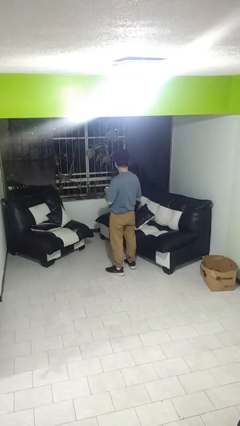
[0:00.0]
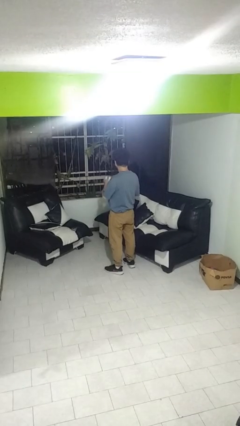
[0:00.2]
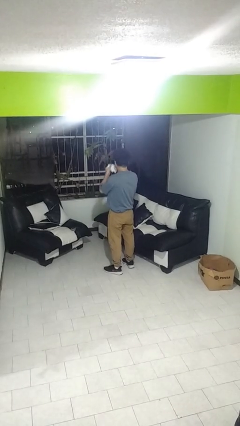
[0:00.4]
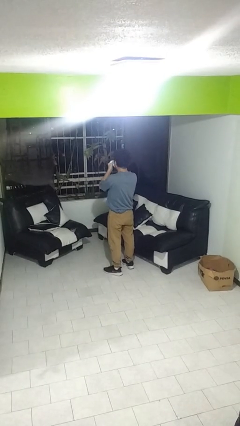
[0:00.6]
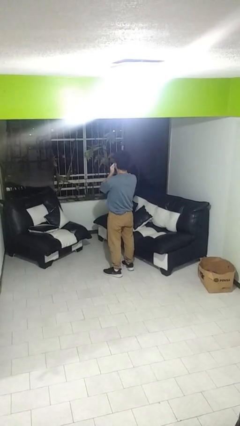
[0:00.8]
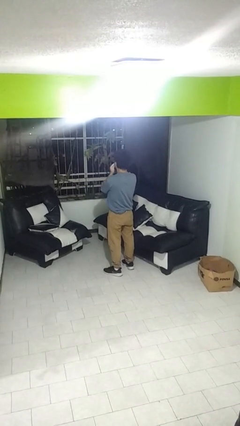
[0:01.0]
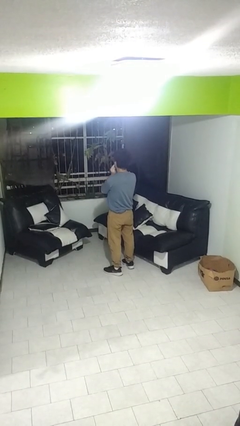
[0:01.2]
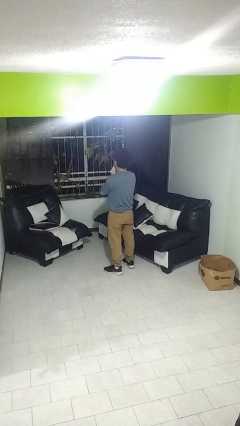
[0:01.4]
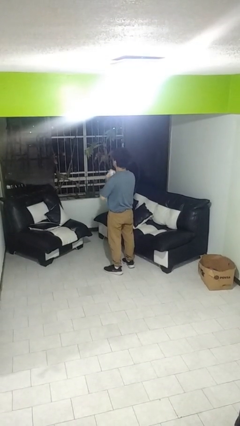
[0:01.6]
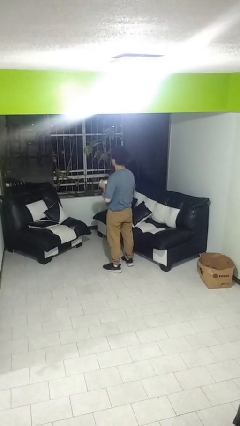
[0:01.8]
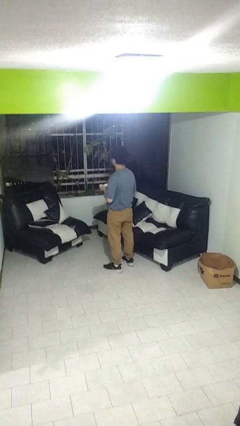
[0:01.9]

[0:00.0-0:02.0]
person wipes mouth with napkin

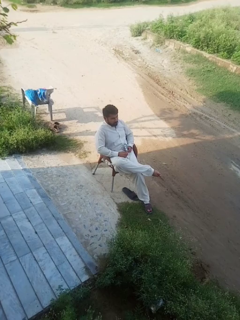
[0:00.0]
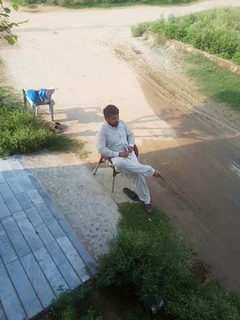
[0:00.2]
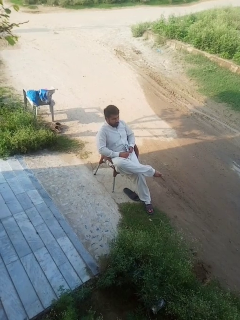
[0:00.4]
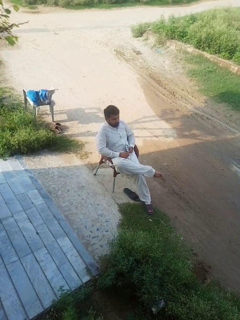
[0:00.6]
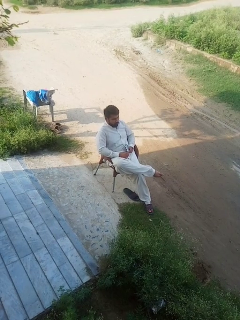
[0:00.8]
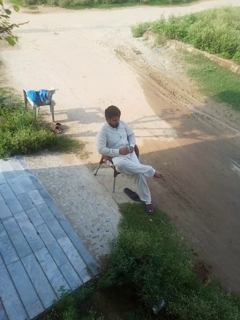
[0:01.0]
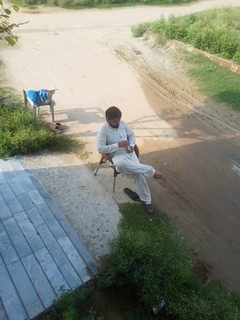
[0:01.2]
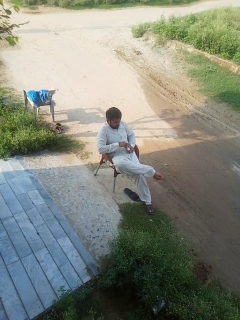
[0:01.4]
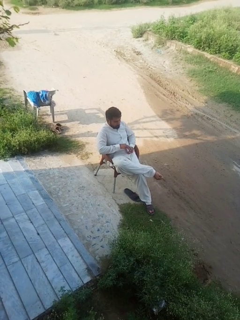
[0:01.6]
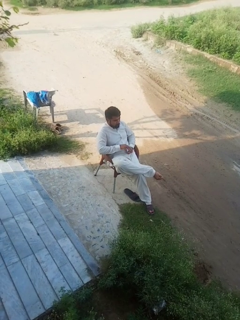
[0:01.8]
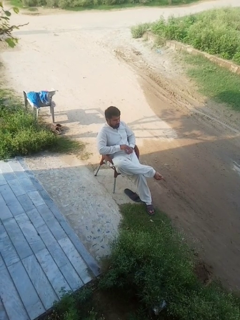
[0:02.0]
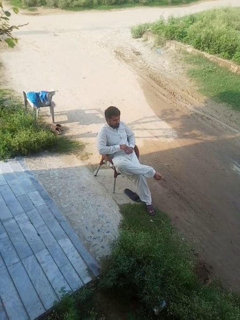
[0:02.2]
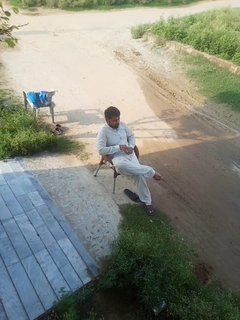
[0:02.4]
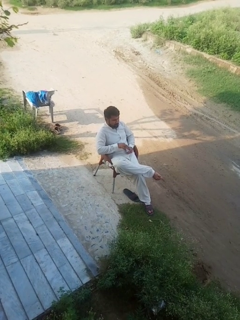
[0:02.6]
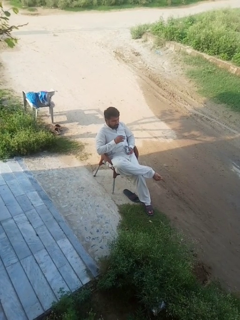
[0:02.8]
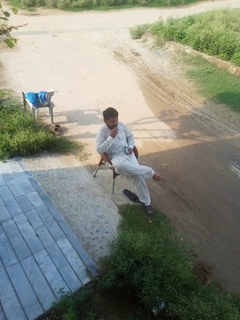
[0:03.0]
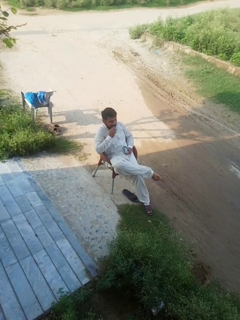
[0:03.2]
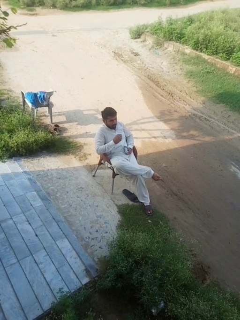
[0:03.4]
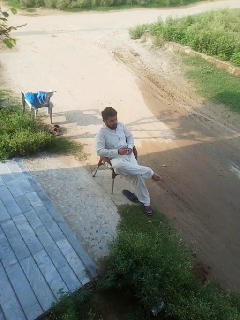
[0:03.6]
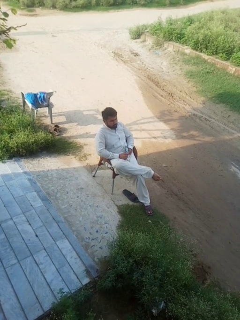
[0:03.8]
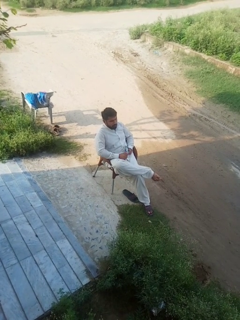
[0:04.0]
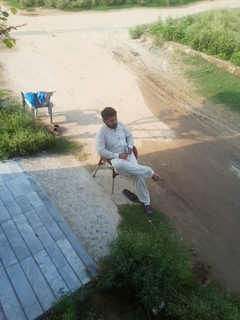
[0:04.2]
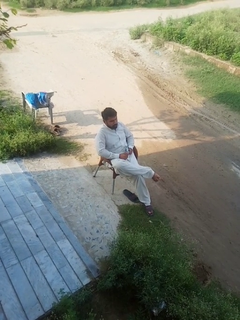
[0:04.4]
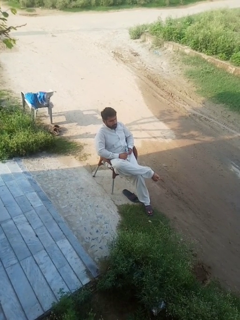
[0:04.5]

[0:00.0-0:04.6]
person eats snack from bag

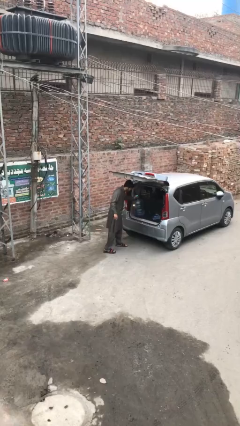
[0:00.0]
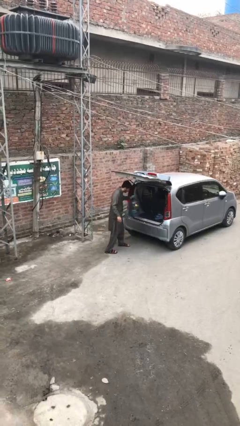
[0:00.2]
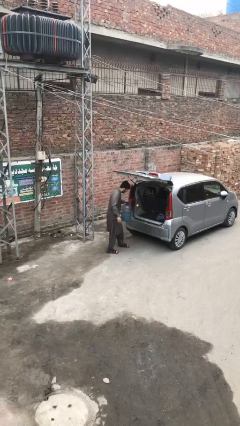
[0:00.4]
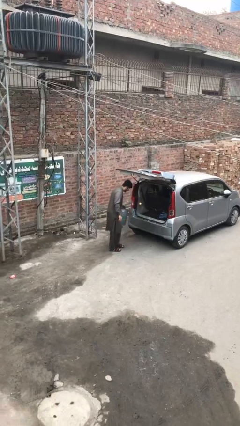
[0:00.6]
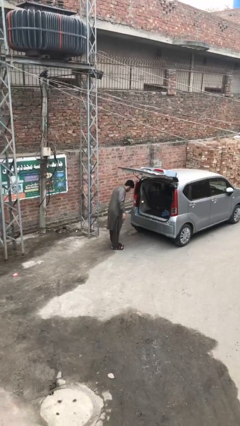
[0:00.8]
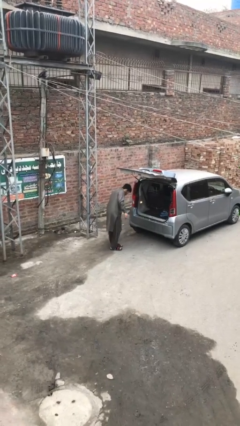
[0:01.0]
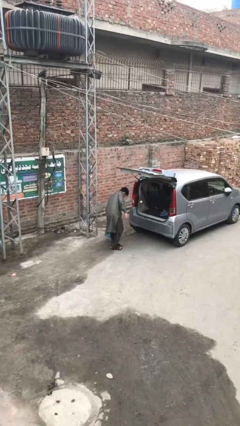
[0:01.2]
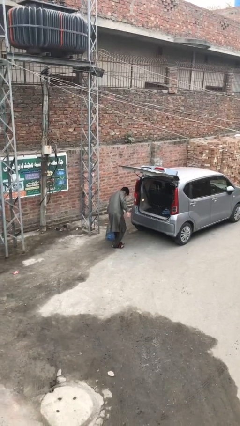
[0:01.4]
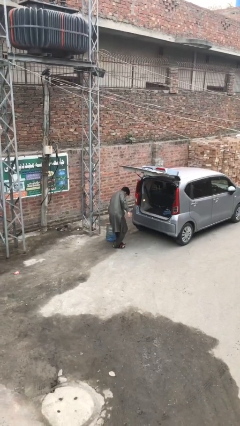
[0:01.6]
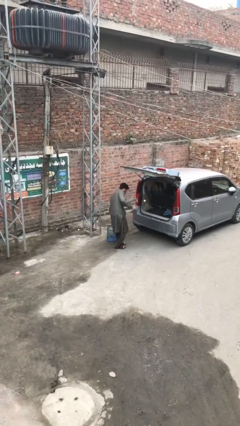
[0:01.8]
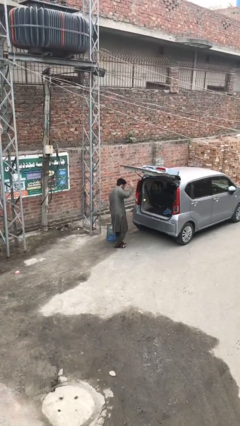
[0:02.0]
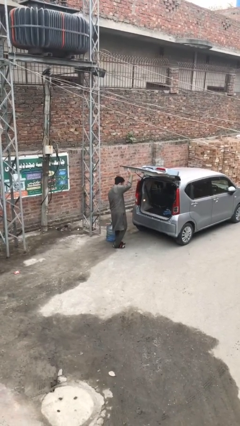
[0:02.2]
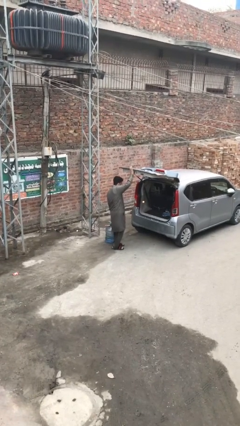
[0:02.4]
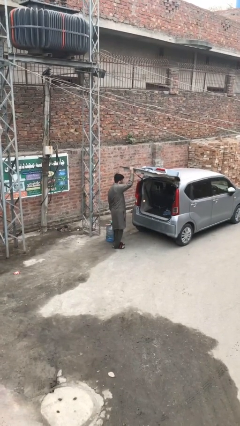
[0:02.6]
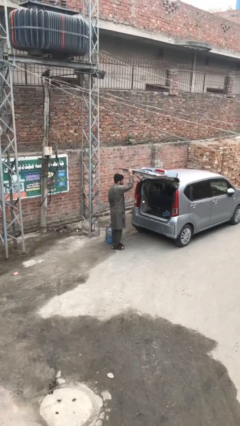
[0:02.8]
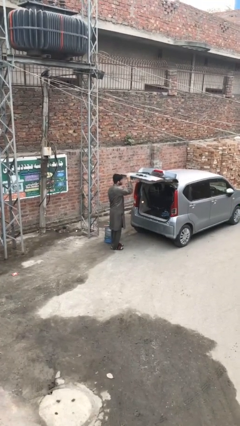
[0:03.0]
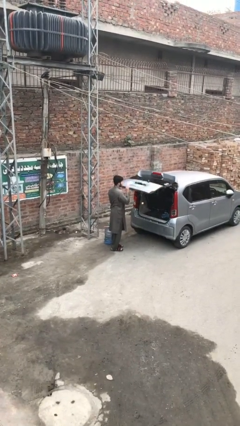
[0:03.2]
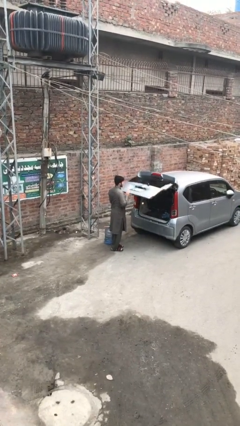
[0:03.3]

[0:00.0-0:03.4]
person unloads car

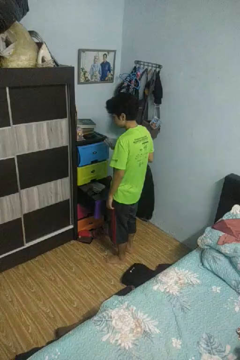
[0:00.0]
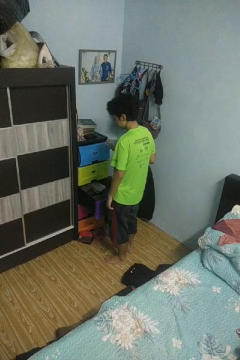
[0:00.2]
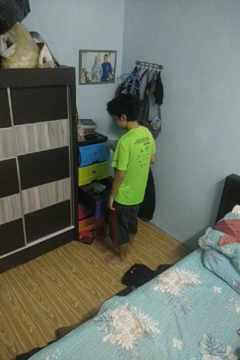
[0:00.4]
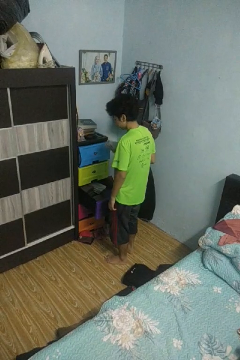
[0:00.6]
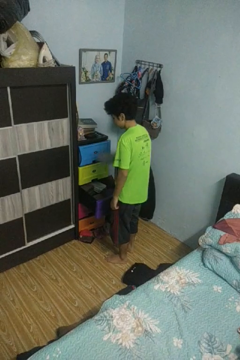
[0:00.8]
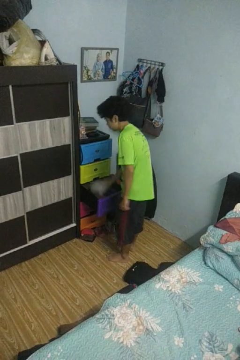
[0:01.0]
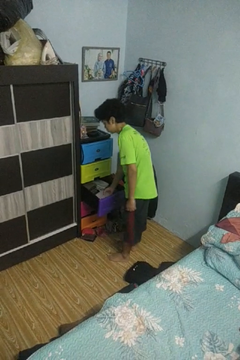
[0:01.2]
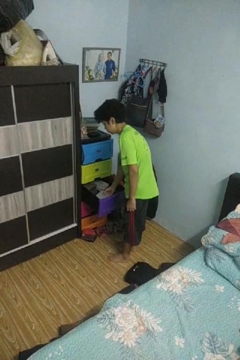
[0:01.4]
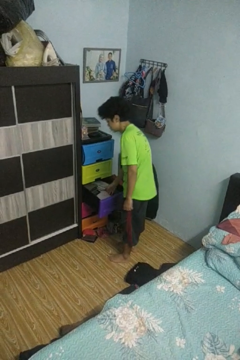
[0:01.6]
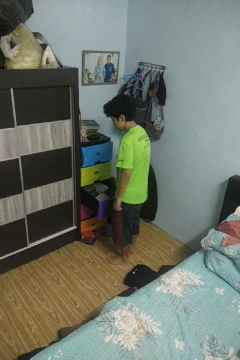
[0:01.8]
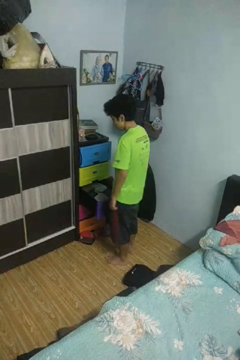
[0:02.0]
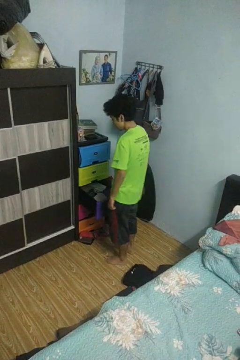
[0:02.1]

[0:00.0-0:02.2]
person puts clothes into dresser

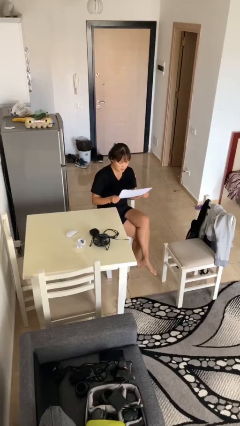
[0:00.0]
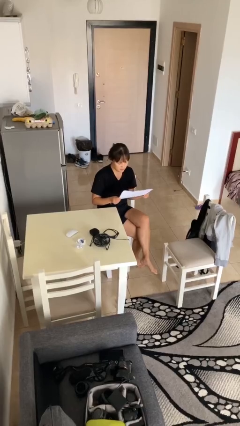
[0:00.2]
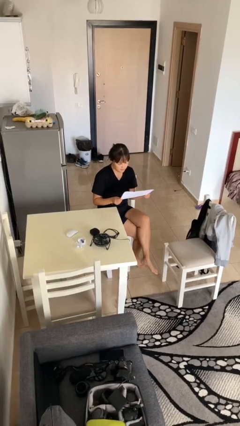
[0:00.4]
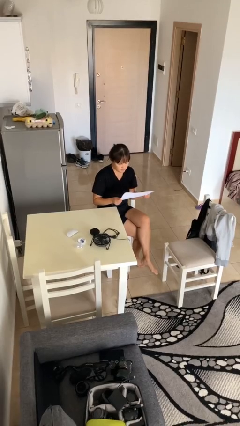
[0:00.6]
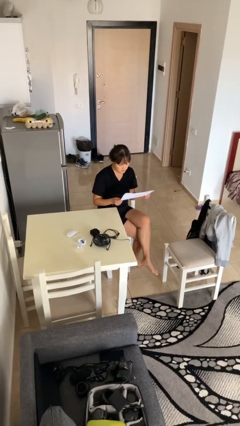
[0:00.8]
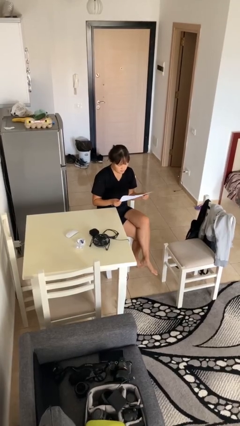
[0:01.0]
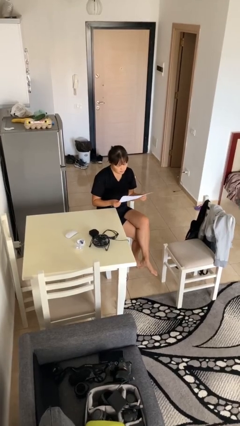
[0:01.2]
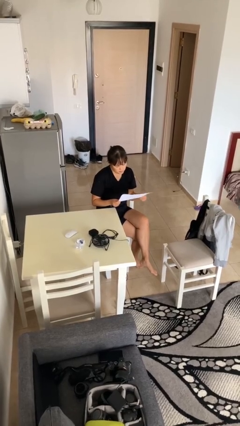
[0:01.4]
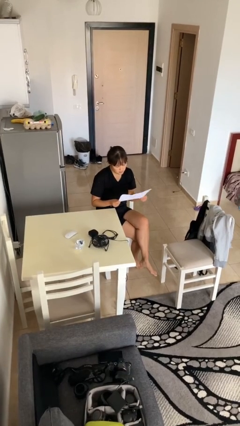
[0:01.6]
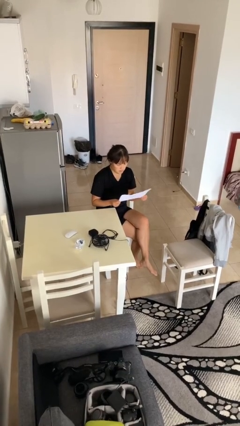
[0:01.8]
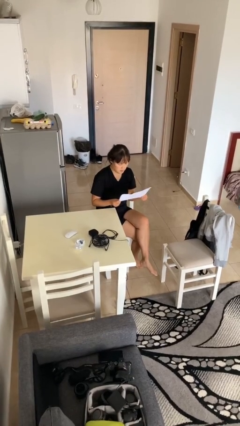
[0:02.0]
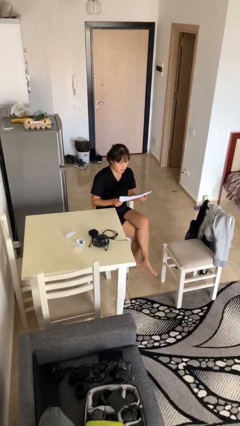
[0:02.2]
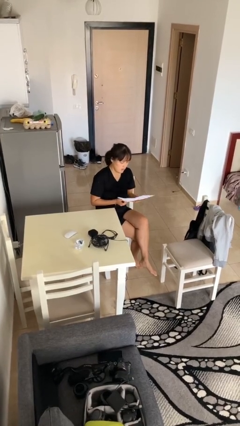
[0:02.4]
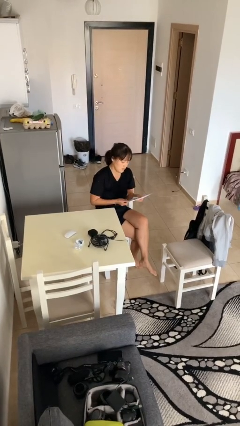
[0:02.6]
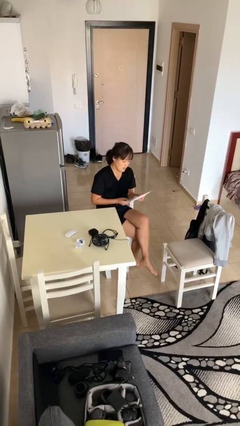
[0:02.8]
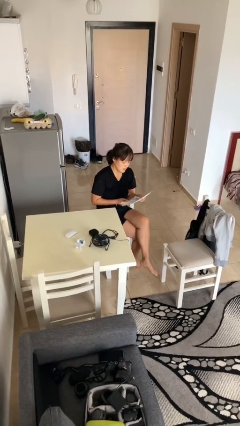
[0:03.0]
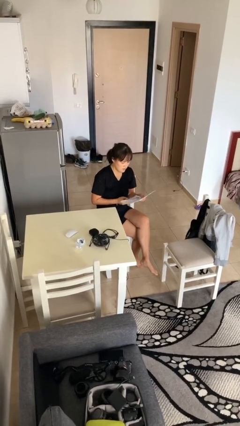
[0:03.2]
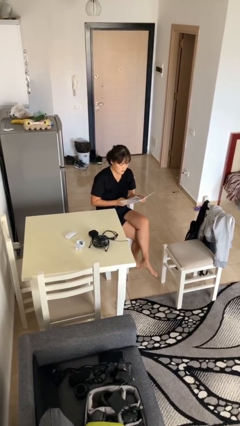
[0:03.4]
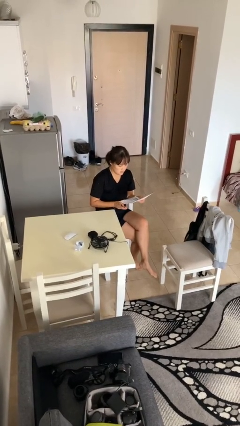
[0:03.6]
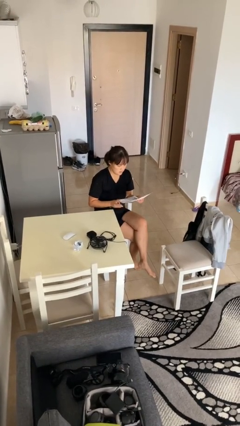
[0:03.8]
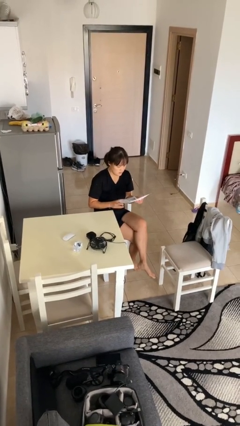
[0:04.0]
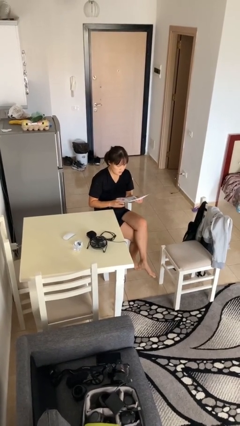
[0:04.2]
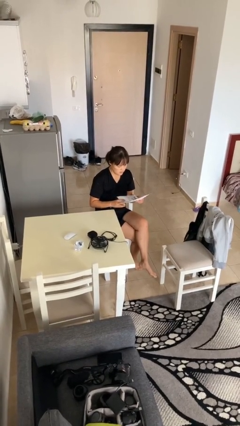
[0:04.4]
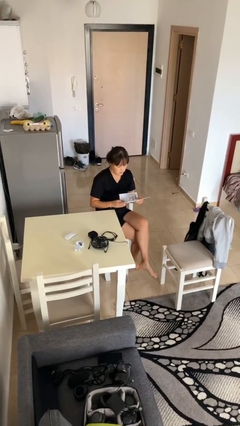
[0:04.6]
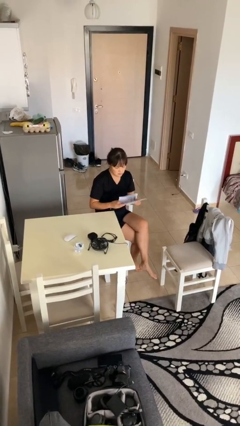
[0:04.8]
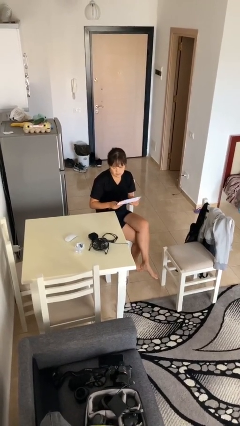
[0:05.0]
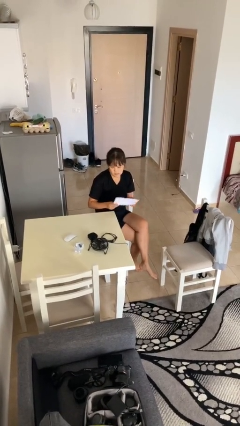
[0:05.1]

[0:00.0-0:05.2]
person reads document

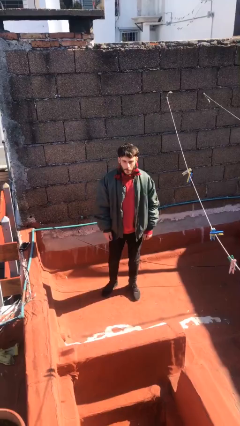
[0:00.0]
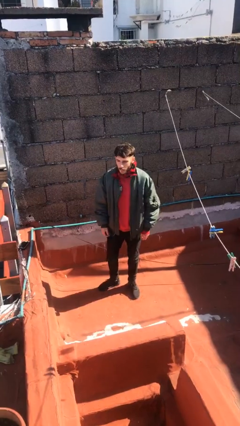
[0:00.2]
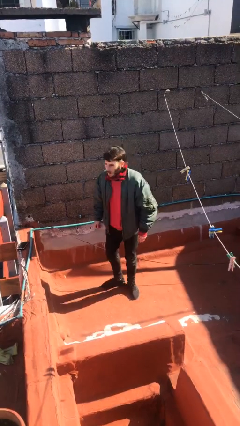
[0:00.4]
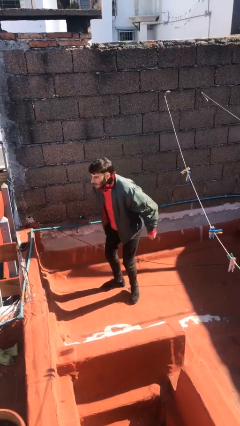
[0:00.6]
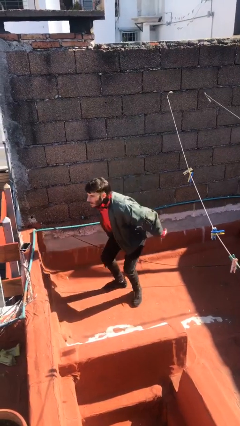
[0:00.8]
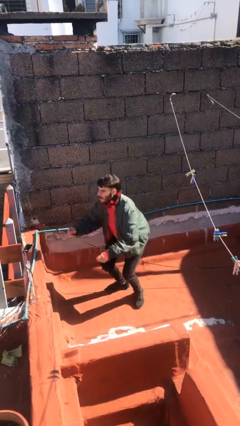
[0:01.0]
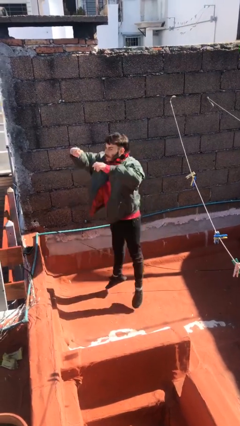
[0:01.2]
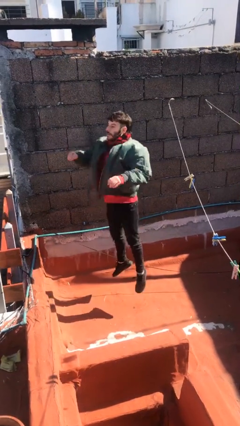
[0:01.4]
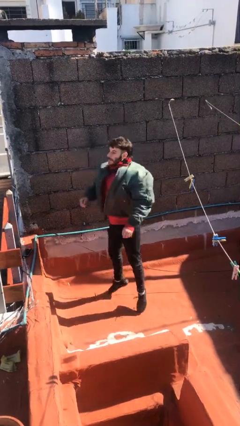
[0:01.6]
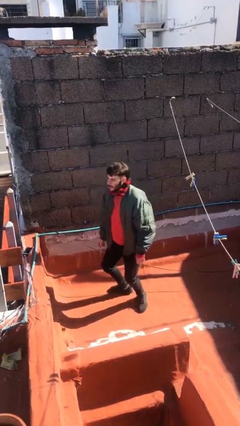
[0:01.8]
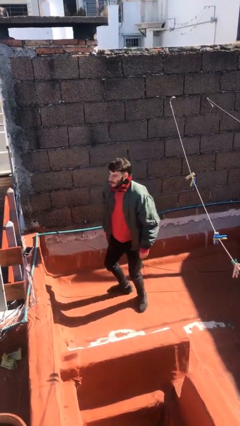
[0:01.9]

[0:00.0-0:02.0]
person jumps
